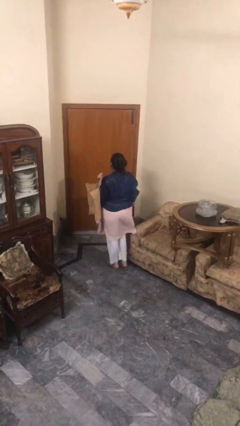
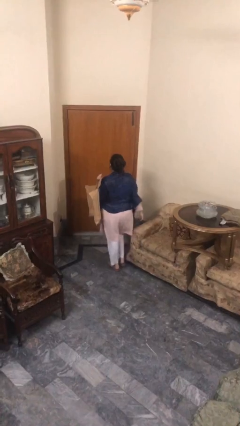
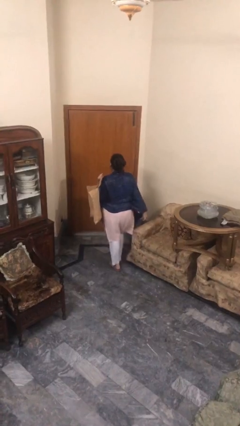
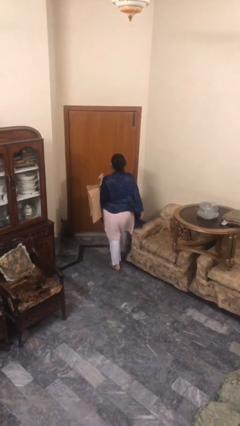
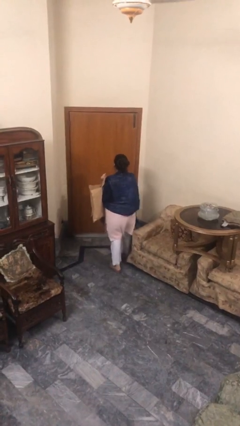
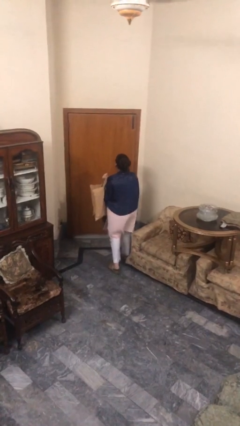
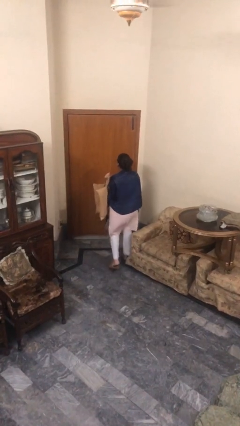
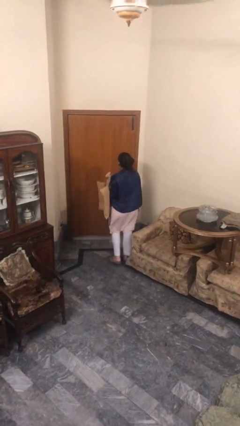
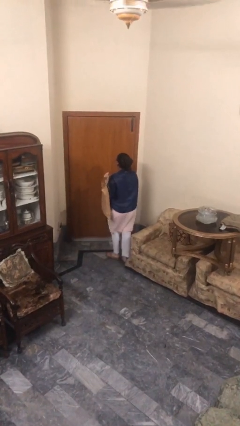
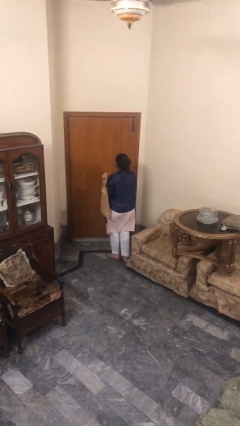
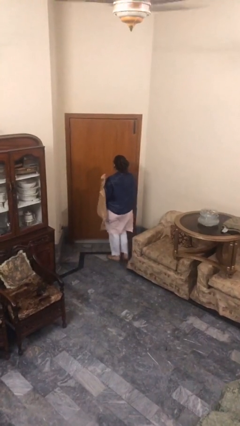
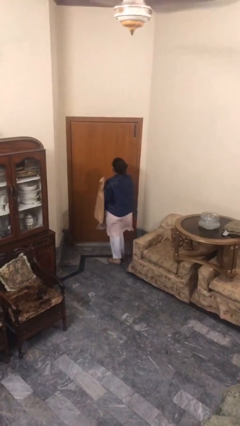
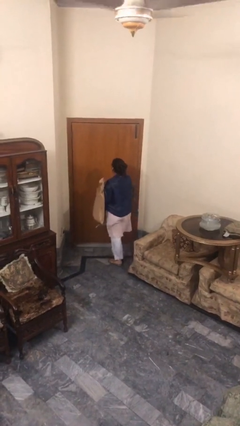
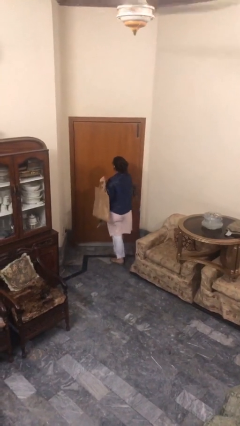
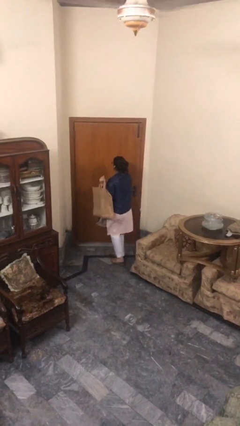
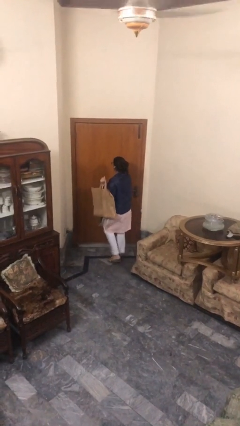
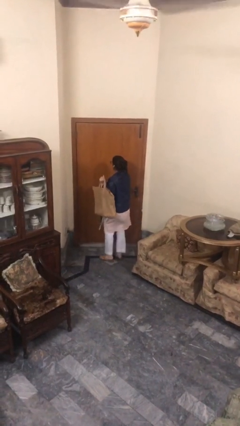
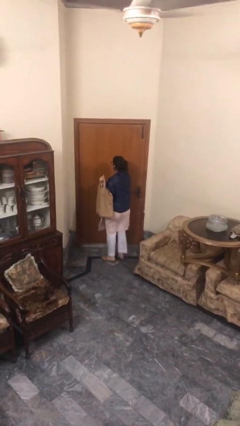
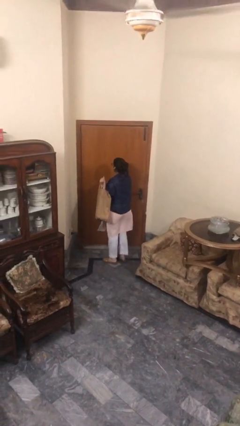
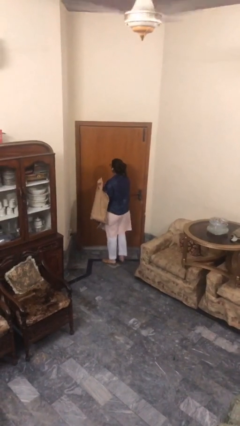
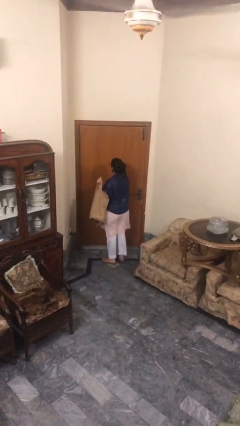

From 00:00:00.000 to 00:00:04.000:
person carries groceries

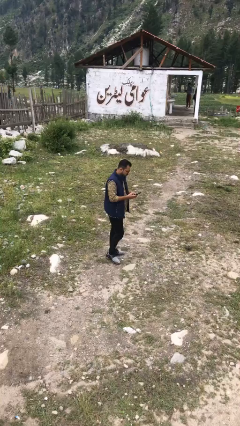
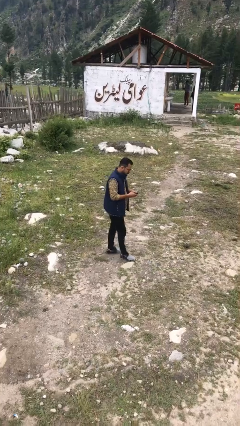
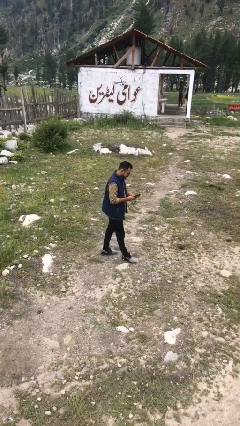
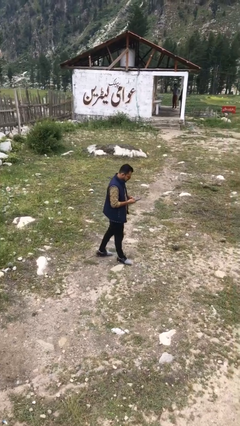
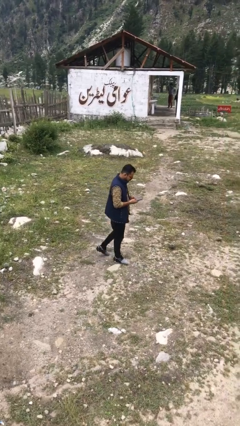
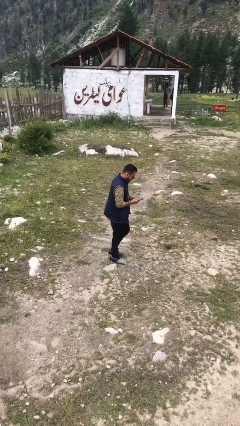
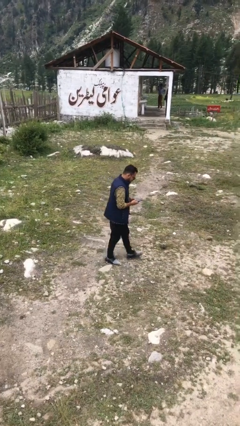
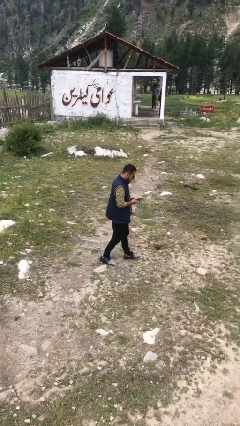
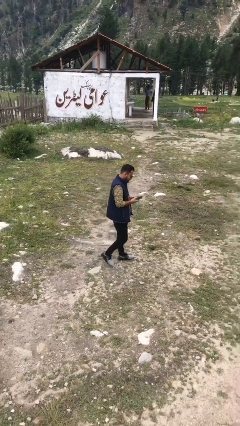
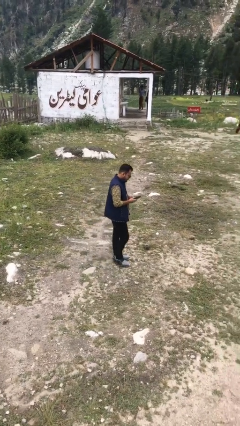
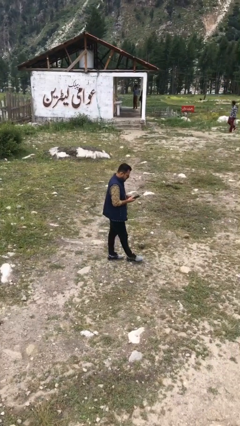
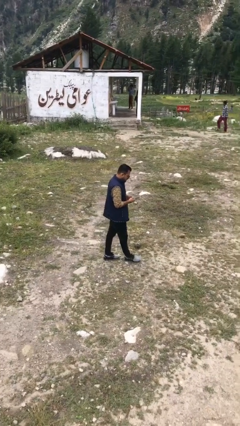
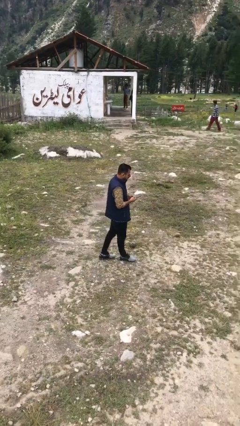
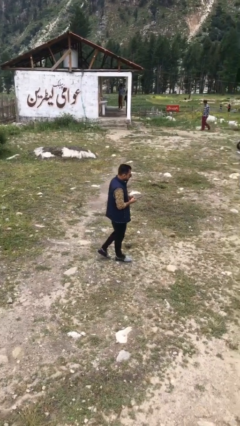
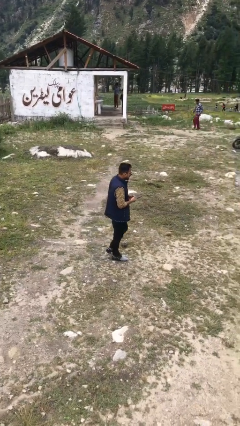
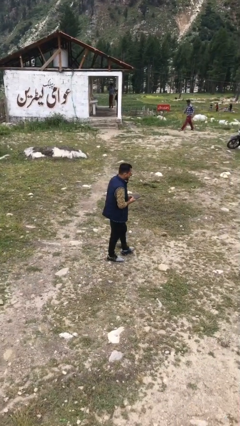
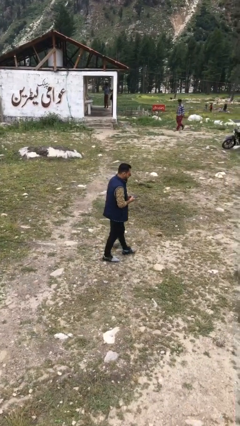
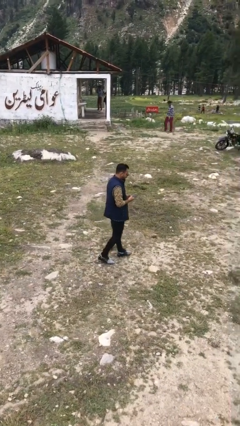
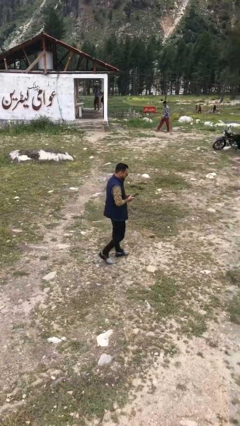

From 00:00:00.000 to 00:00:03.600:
person texts on phone

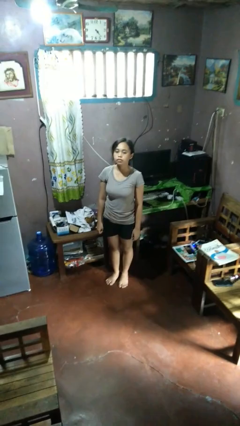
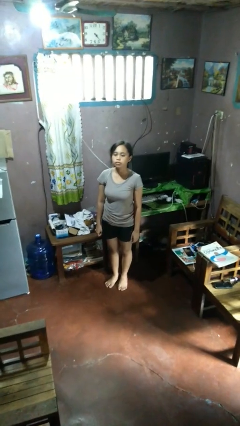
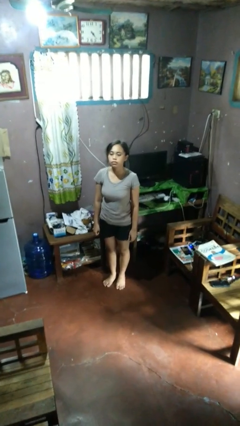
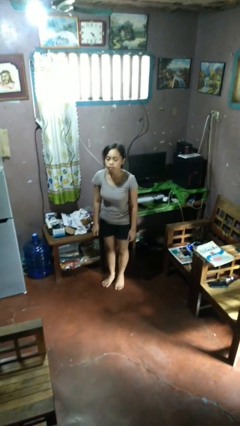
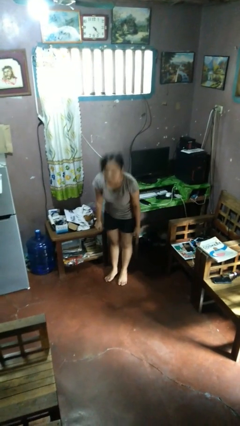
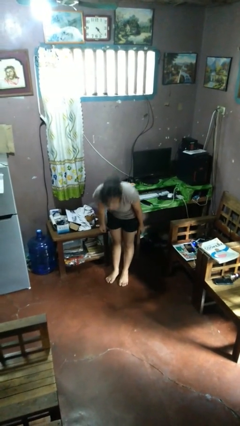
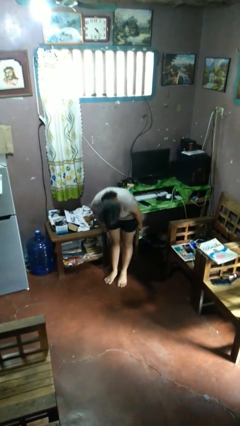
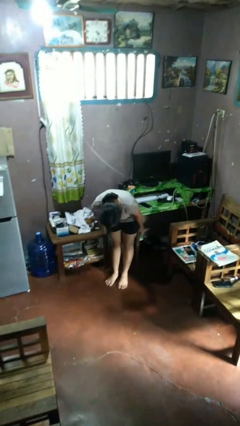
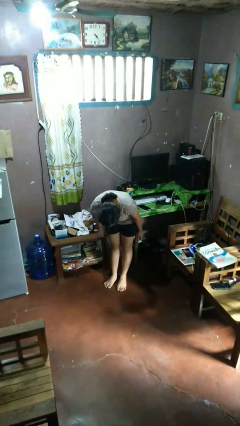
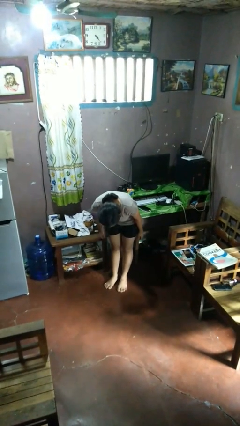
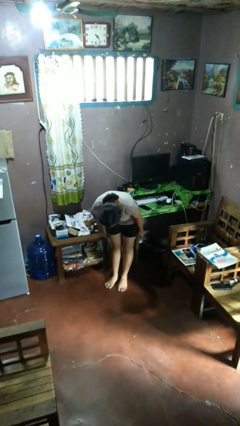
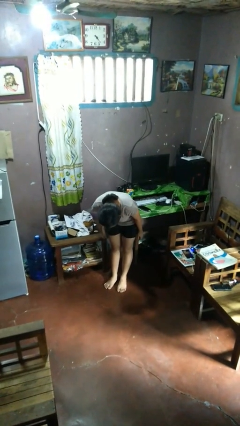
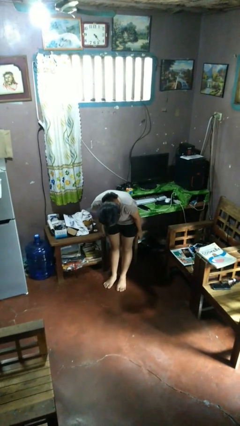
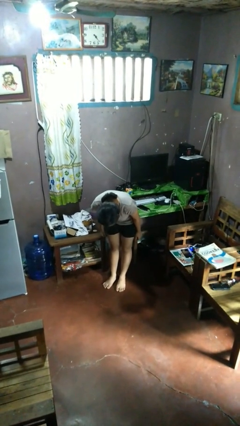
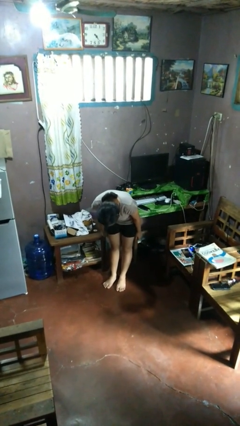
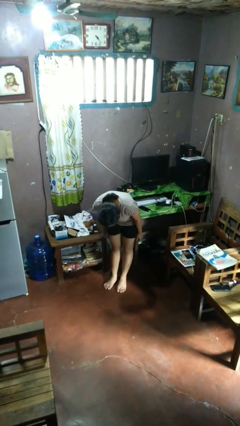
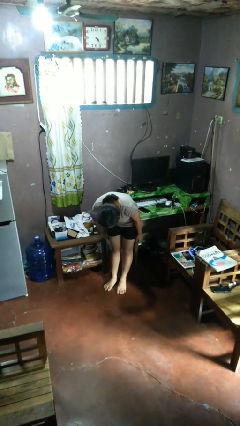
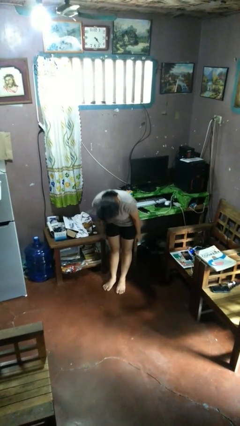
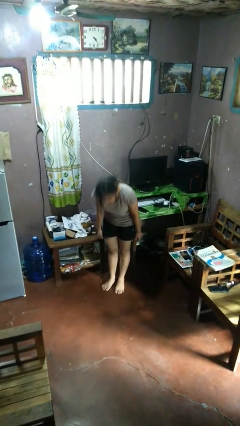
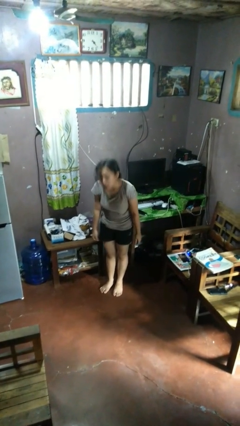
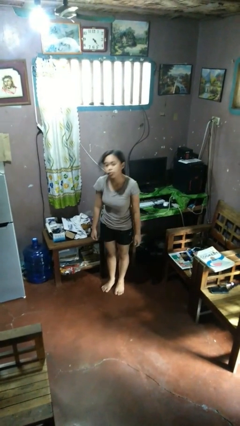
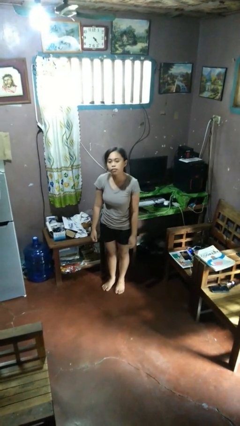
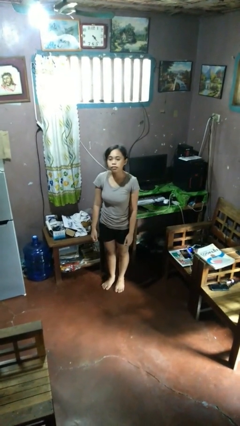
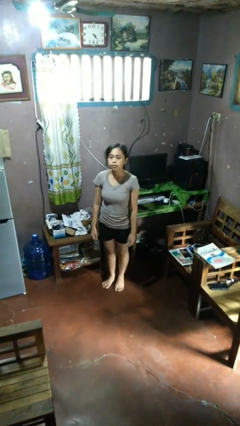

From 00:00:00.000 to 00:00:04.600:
person bows

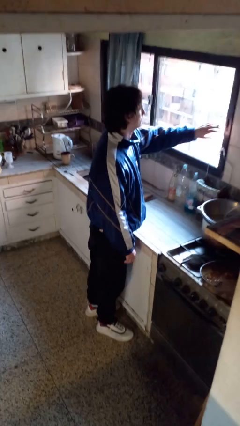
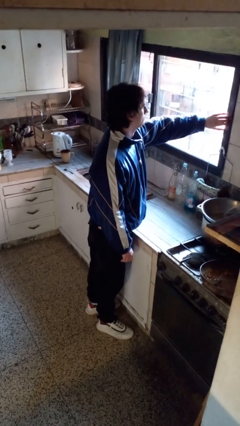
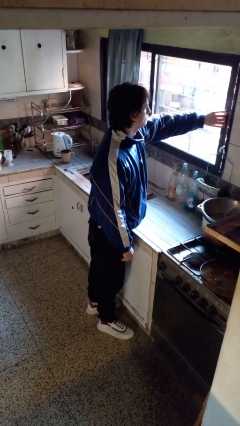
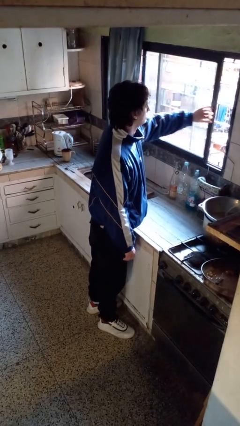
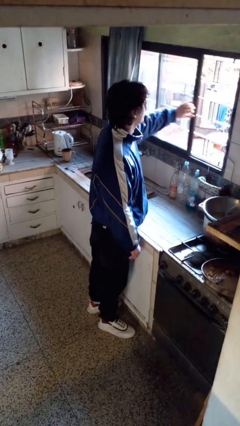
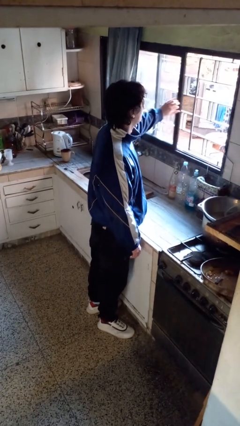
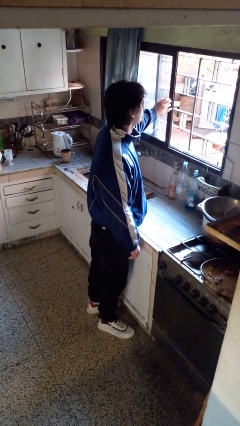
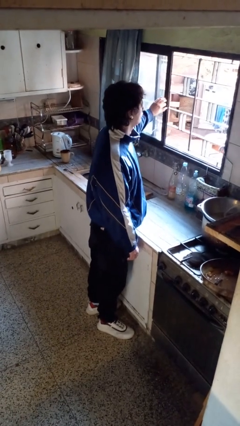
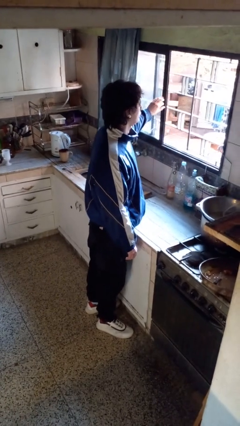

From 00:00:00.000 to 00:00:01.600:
person opens home window

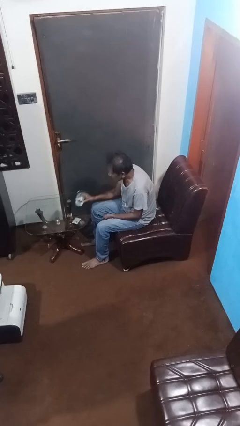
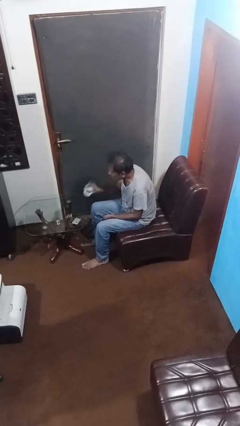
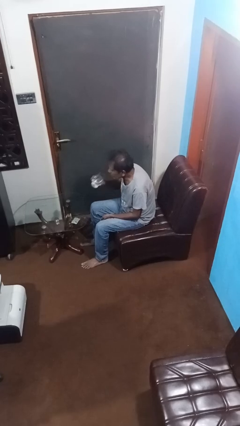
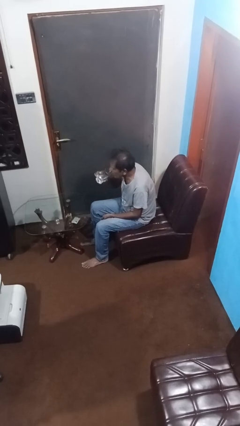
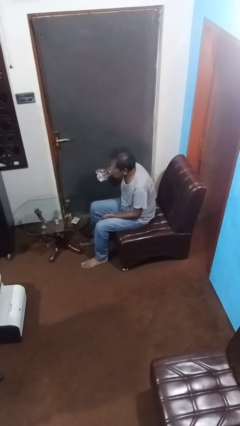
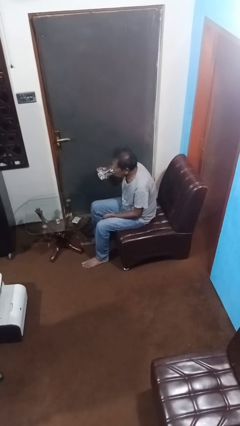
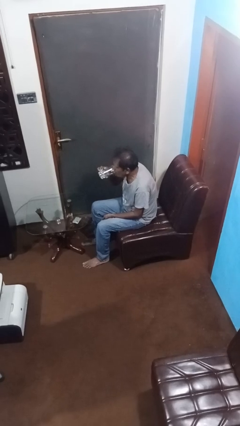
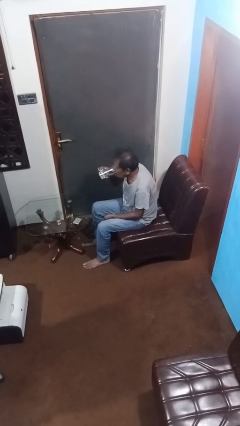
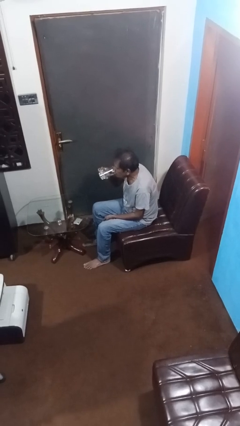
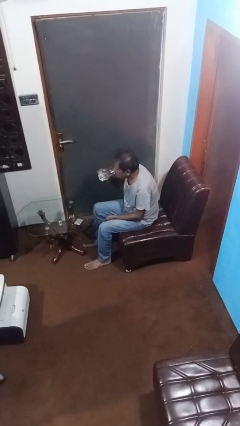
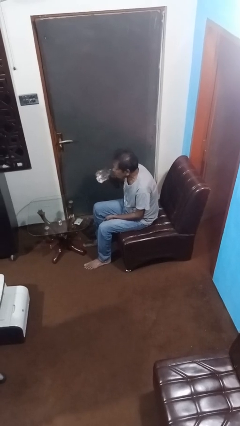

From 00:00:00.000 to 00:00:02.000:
person drinks from cup

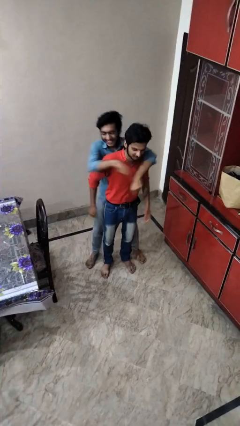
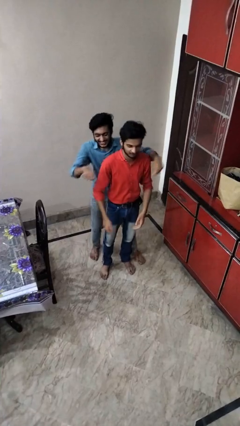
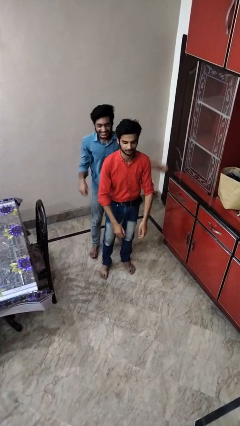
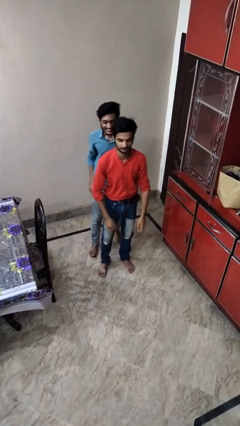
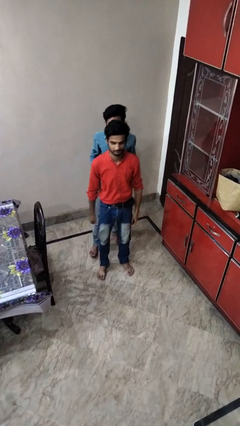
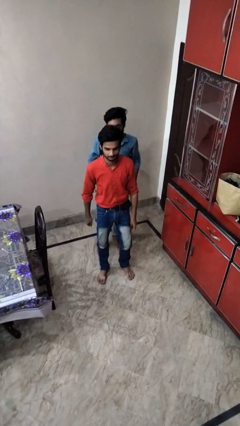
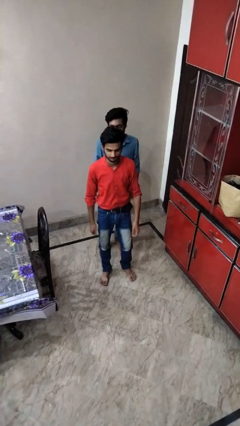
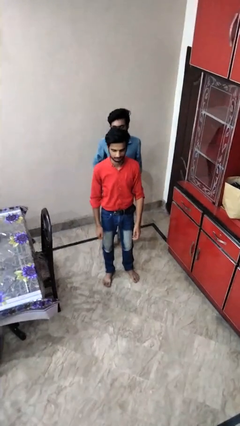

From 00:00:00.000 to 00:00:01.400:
person puts down person
